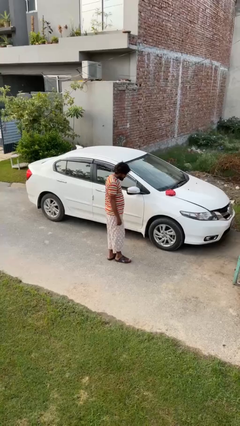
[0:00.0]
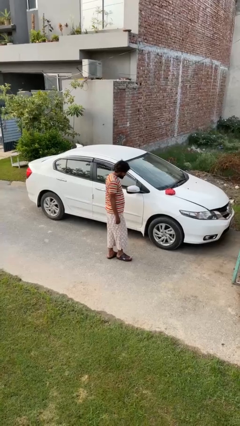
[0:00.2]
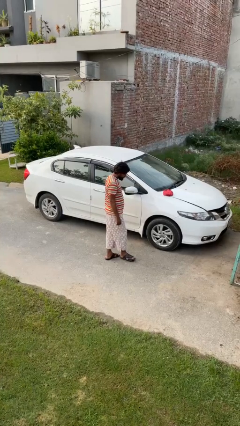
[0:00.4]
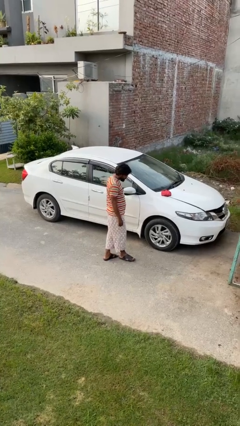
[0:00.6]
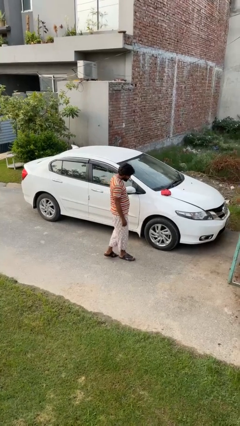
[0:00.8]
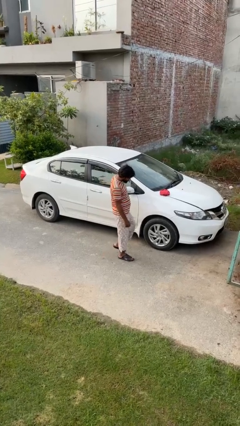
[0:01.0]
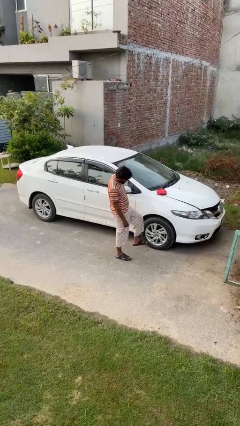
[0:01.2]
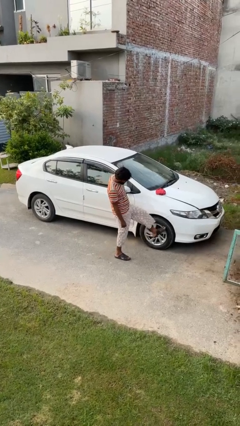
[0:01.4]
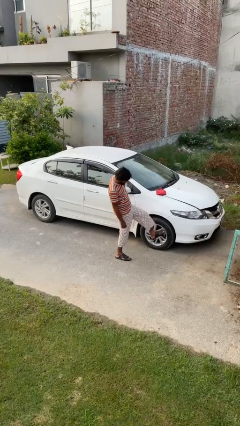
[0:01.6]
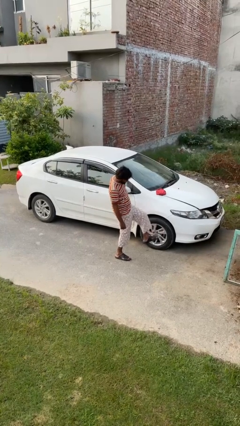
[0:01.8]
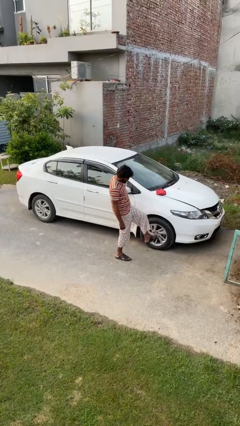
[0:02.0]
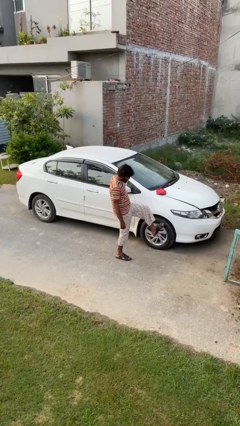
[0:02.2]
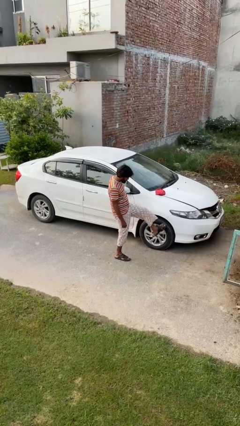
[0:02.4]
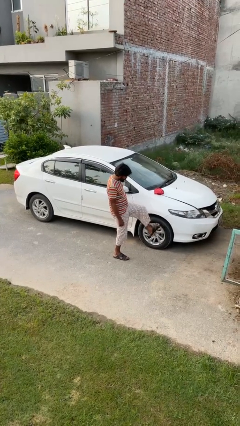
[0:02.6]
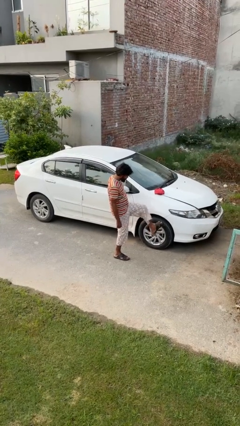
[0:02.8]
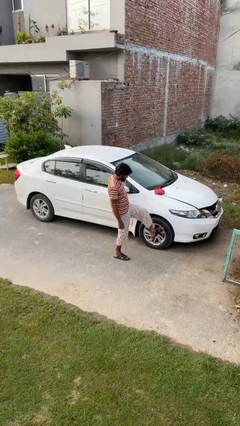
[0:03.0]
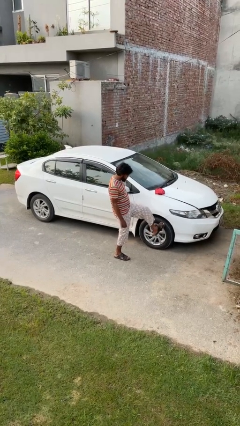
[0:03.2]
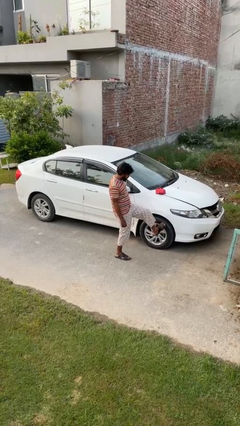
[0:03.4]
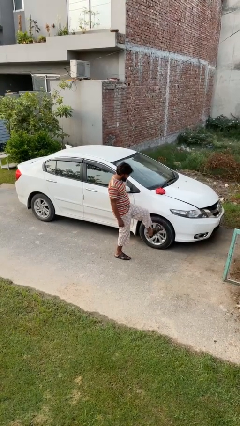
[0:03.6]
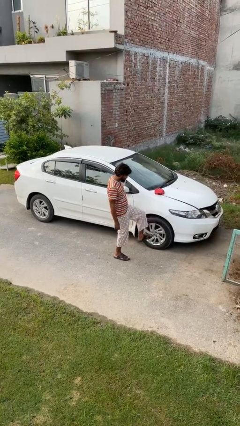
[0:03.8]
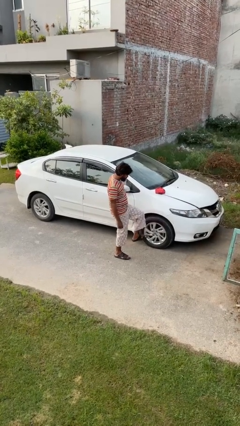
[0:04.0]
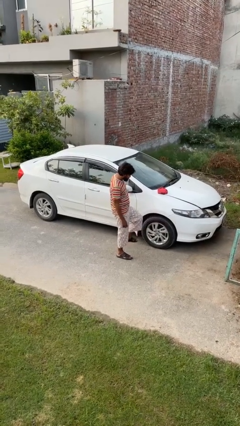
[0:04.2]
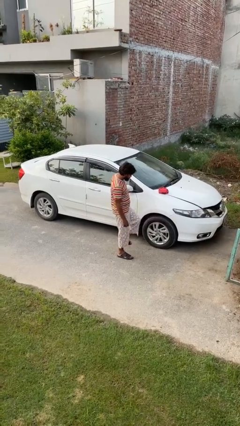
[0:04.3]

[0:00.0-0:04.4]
person kicks car tires

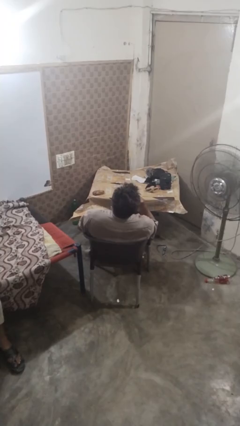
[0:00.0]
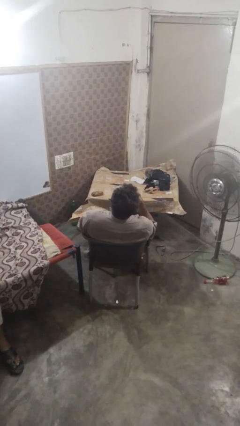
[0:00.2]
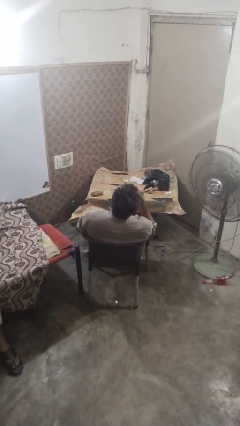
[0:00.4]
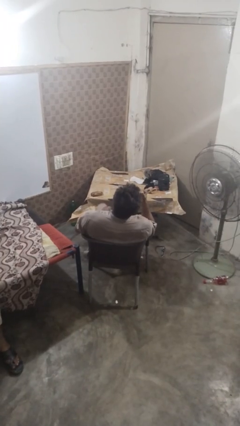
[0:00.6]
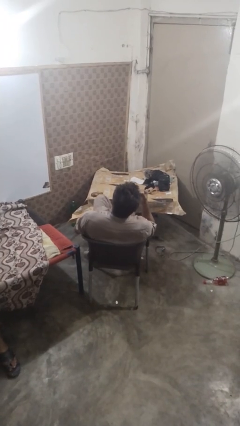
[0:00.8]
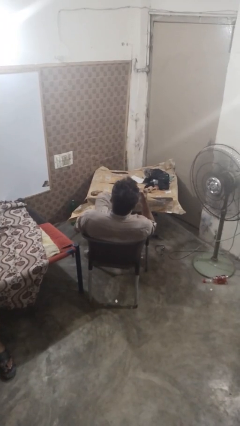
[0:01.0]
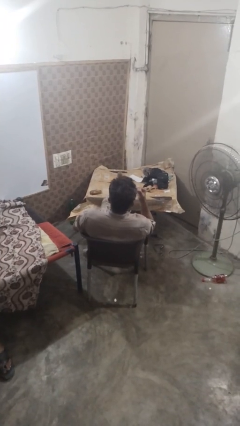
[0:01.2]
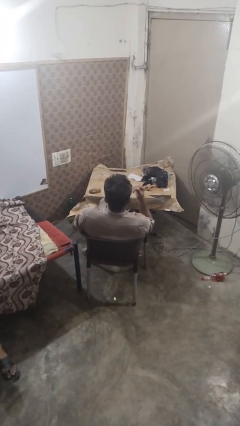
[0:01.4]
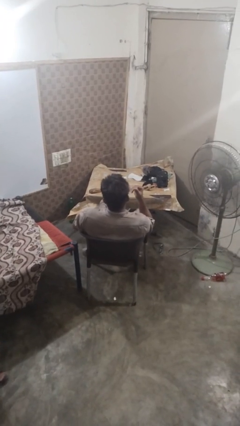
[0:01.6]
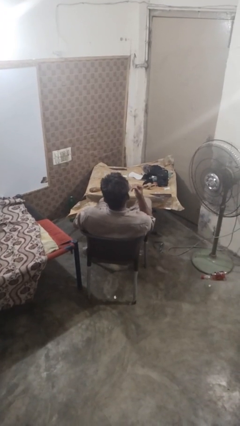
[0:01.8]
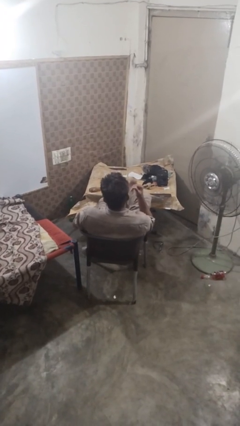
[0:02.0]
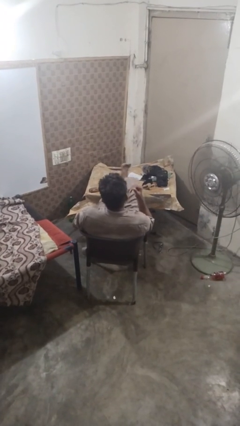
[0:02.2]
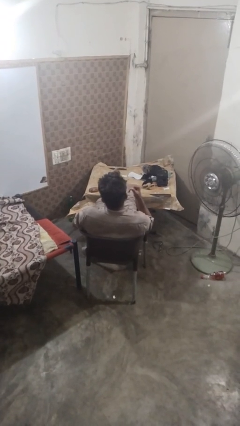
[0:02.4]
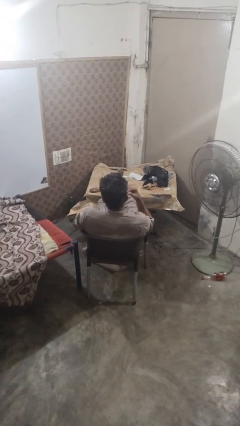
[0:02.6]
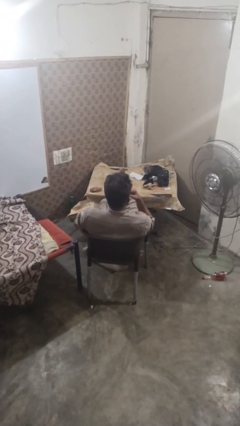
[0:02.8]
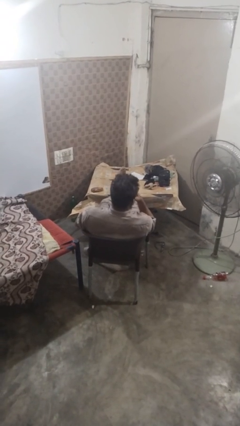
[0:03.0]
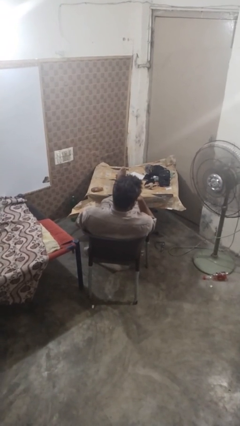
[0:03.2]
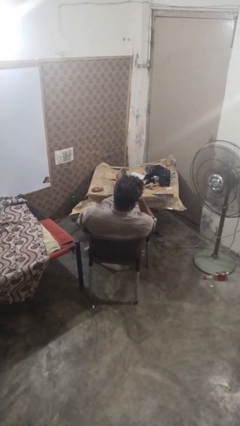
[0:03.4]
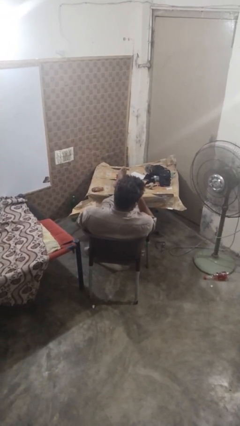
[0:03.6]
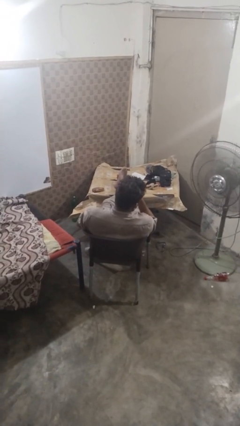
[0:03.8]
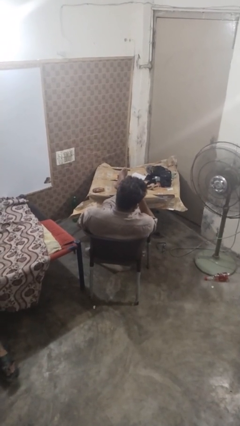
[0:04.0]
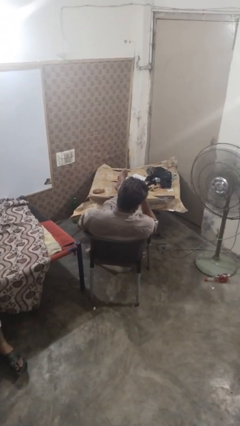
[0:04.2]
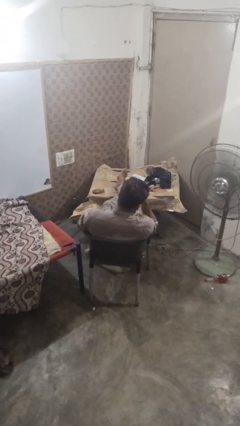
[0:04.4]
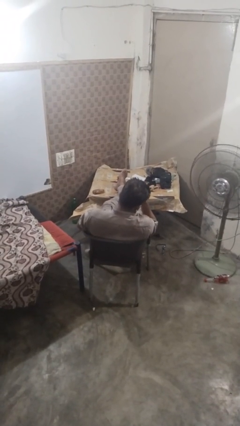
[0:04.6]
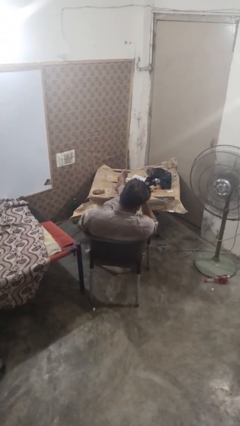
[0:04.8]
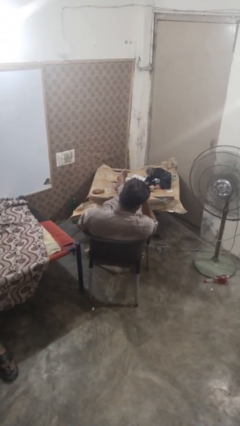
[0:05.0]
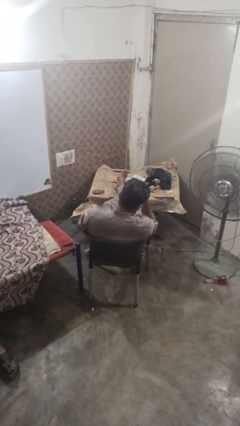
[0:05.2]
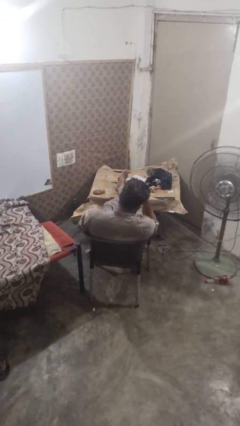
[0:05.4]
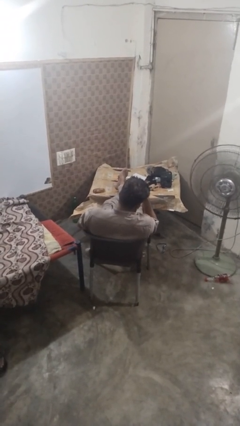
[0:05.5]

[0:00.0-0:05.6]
person puts feet up

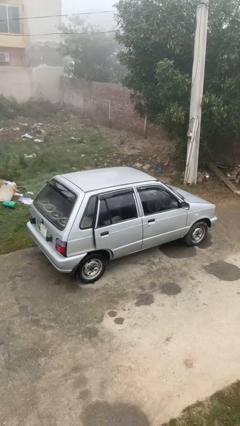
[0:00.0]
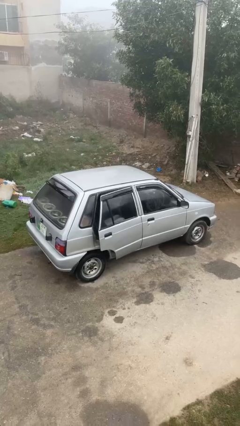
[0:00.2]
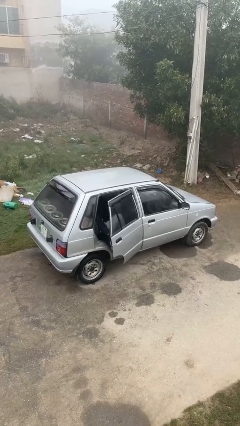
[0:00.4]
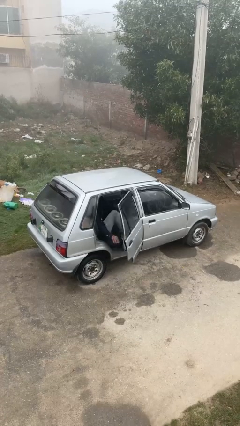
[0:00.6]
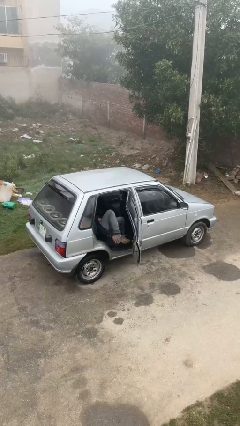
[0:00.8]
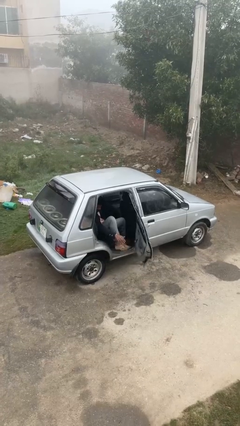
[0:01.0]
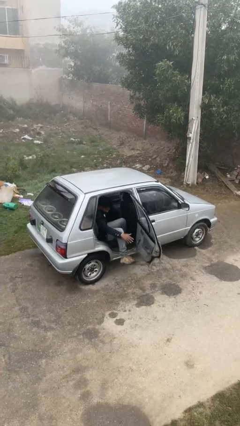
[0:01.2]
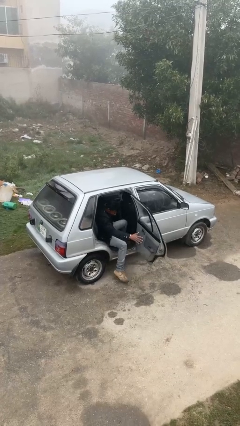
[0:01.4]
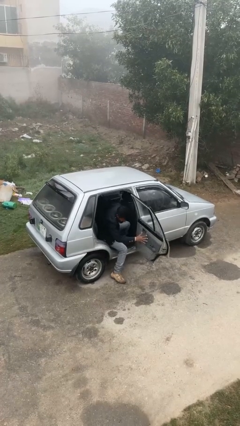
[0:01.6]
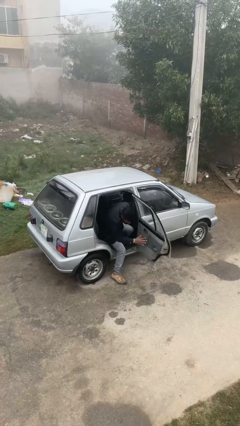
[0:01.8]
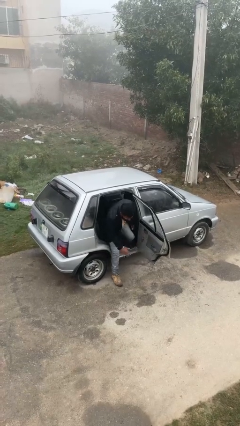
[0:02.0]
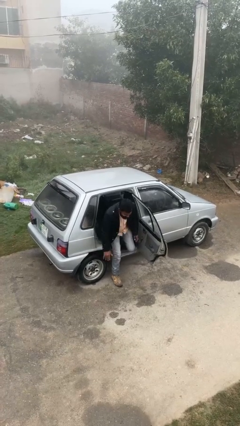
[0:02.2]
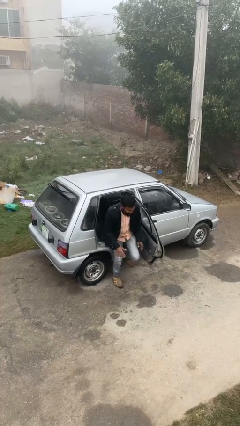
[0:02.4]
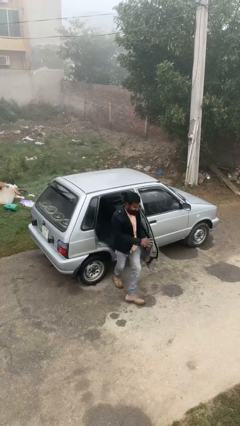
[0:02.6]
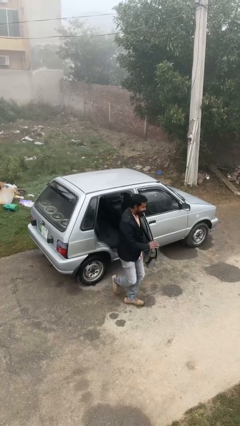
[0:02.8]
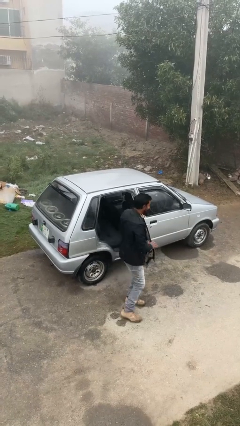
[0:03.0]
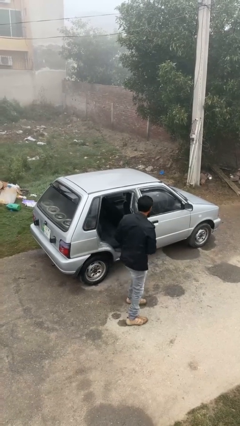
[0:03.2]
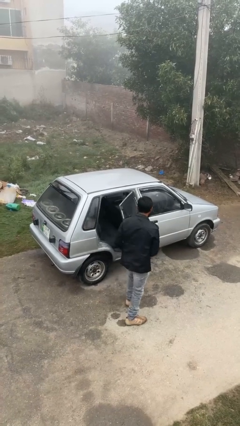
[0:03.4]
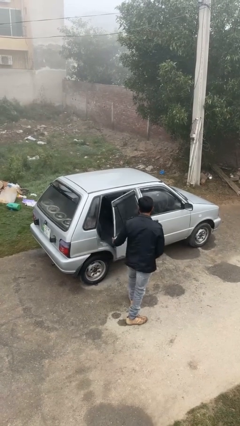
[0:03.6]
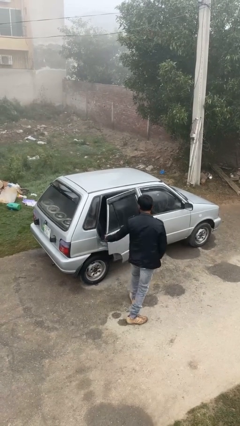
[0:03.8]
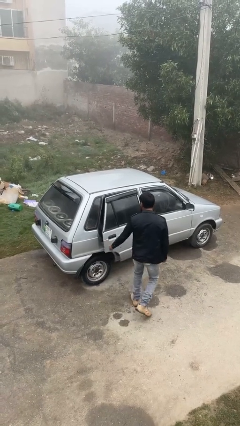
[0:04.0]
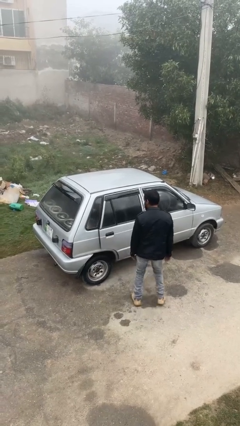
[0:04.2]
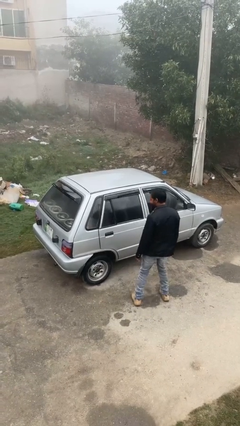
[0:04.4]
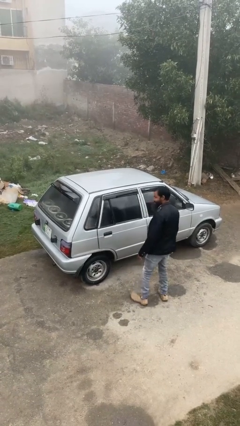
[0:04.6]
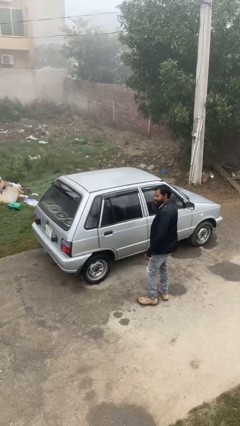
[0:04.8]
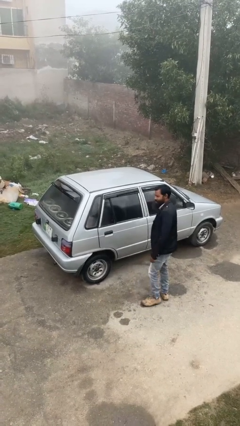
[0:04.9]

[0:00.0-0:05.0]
car drops off person

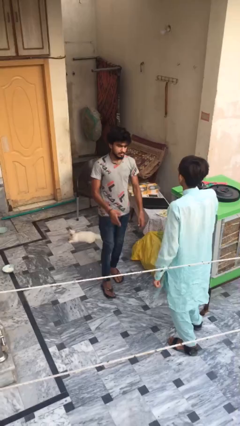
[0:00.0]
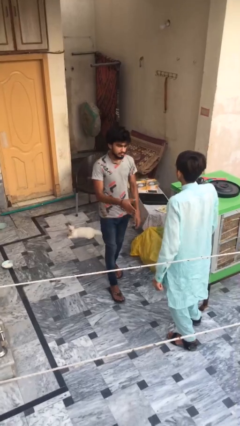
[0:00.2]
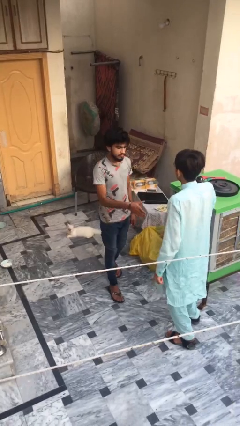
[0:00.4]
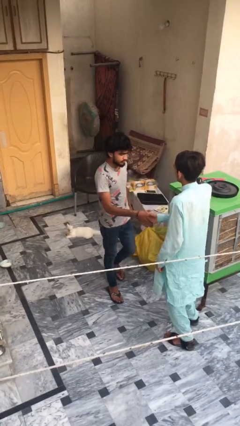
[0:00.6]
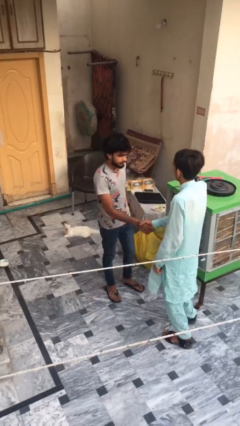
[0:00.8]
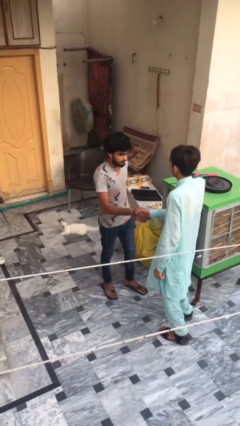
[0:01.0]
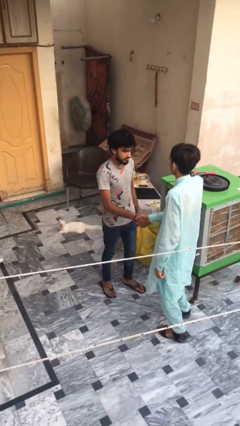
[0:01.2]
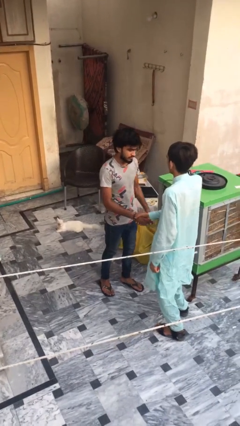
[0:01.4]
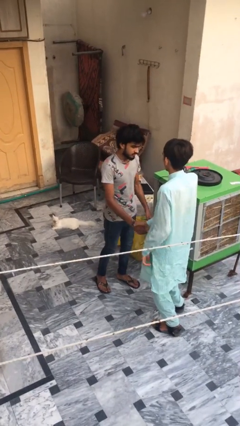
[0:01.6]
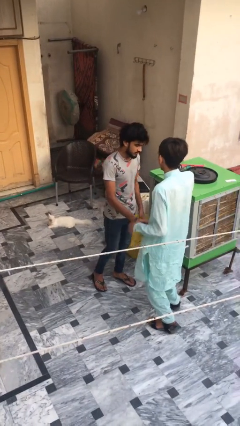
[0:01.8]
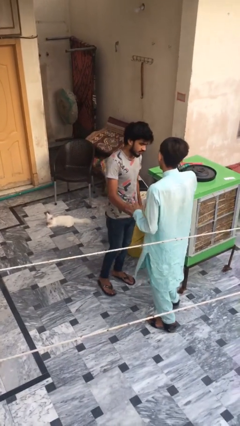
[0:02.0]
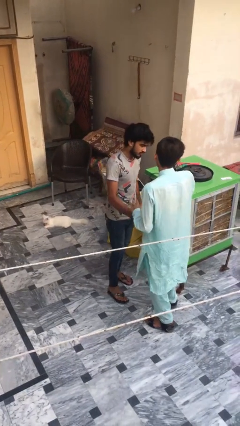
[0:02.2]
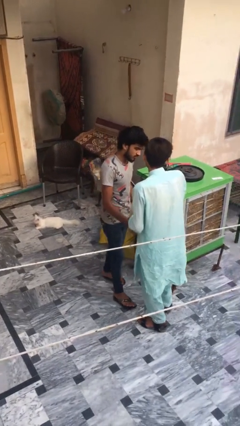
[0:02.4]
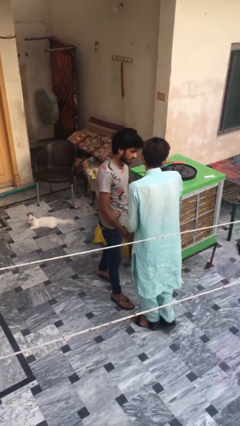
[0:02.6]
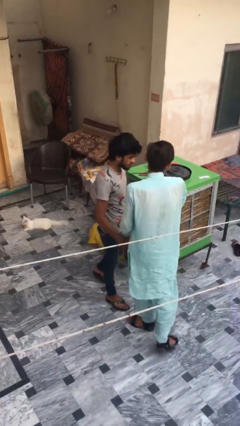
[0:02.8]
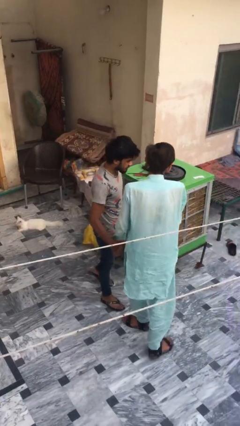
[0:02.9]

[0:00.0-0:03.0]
person shakes hand

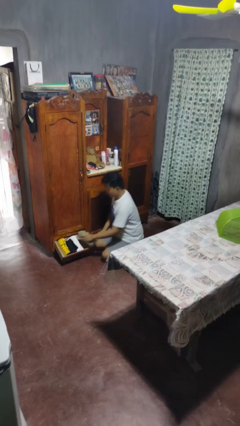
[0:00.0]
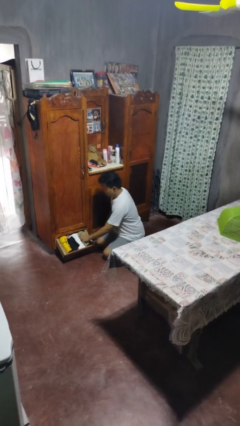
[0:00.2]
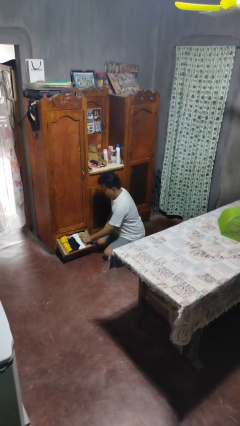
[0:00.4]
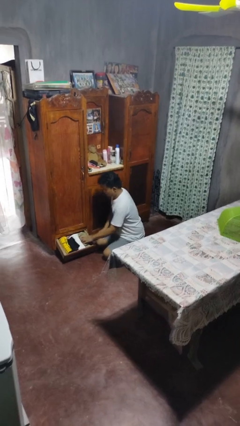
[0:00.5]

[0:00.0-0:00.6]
person puts clothes into dresser
